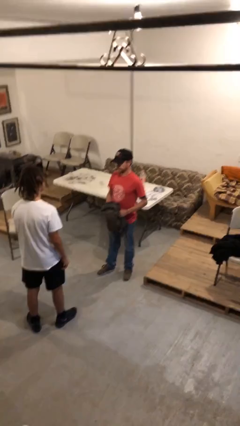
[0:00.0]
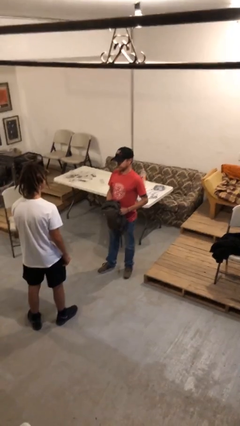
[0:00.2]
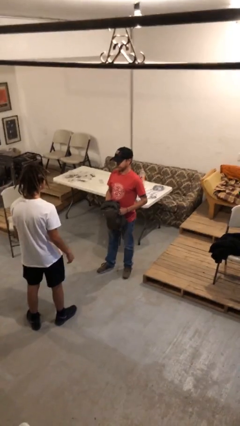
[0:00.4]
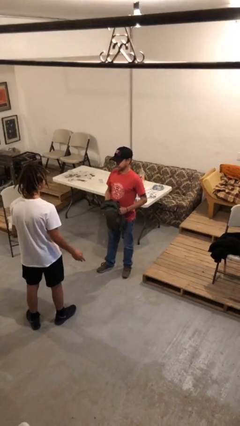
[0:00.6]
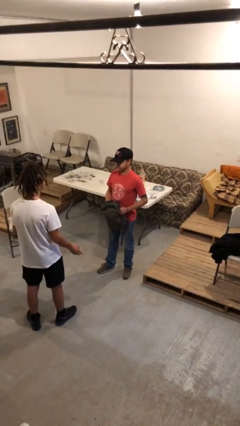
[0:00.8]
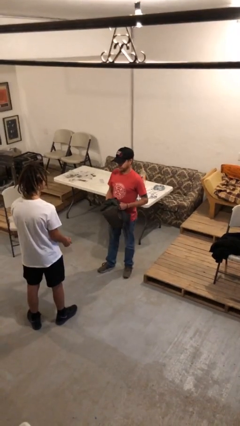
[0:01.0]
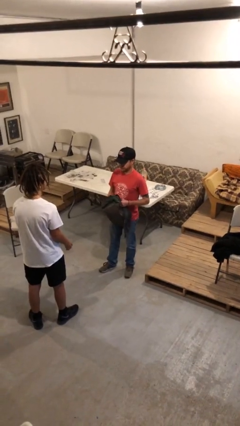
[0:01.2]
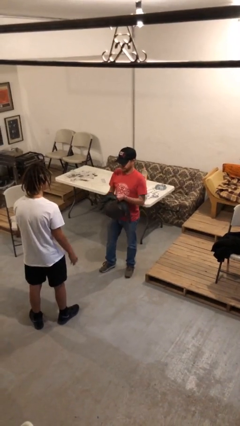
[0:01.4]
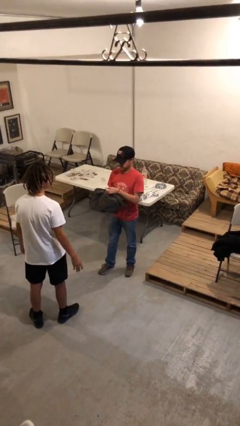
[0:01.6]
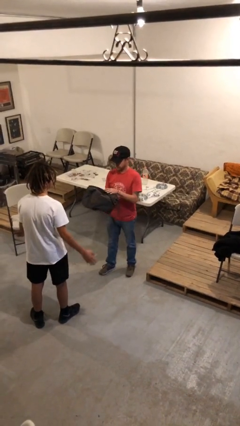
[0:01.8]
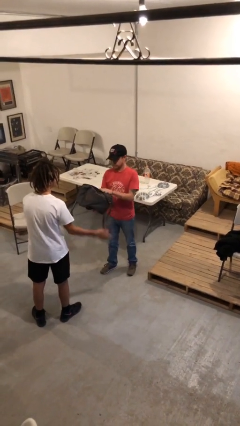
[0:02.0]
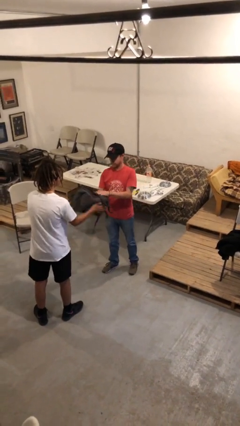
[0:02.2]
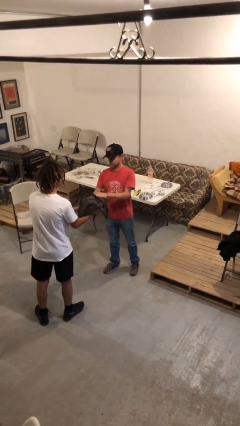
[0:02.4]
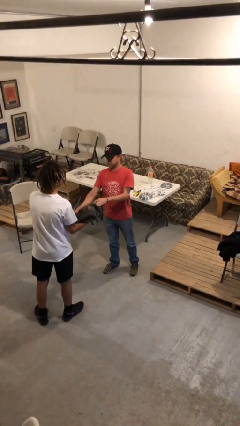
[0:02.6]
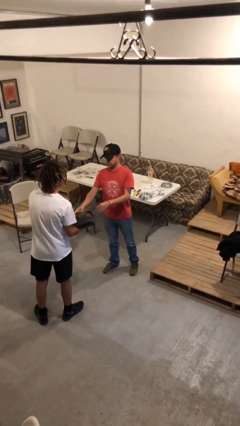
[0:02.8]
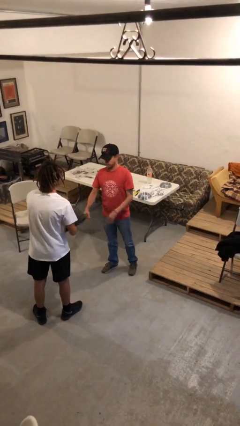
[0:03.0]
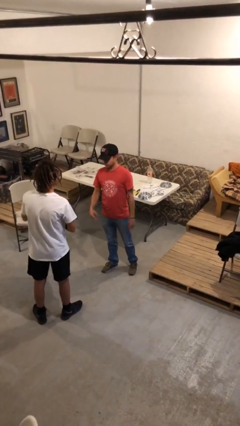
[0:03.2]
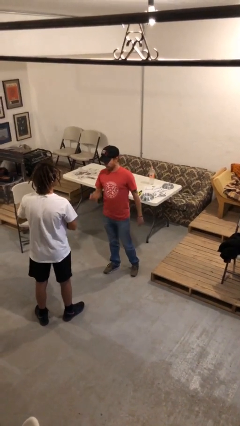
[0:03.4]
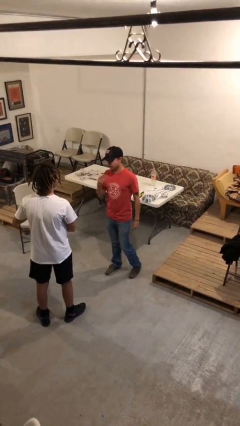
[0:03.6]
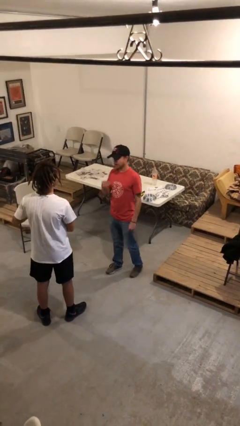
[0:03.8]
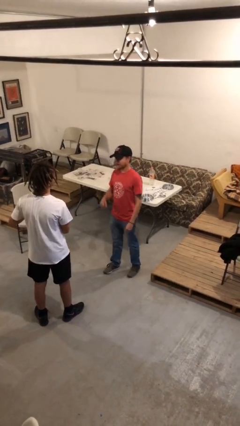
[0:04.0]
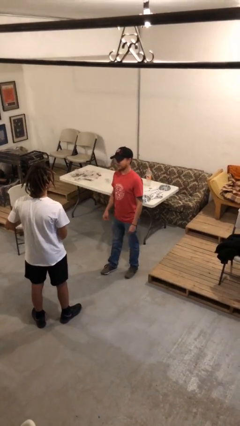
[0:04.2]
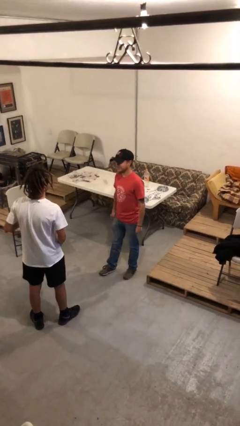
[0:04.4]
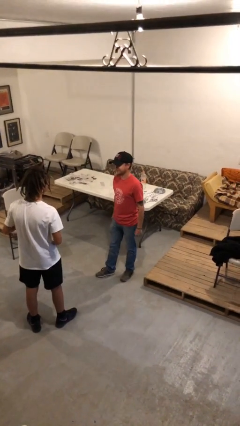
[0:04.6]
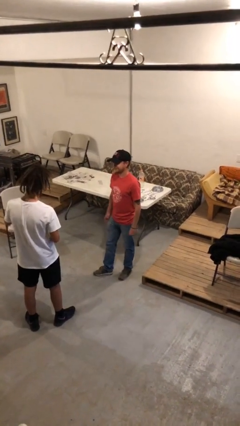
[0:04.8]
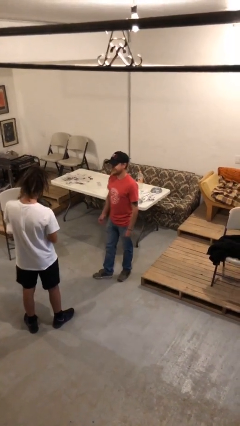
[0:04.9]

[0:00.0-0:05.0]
person transfers object to person

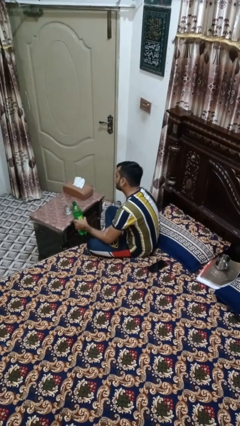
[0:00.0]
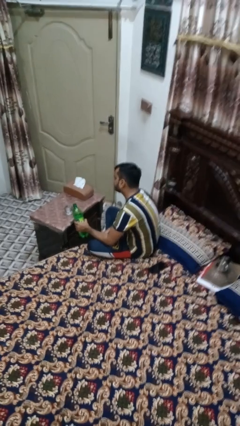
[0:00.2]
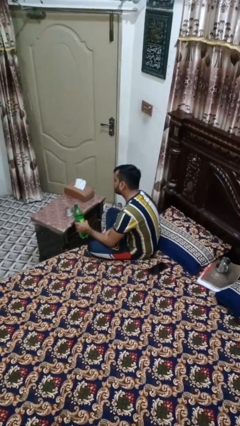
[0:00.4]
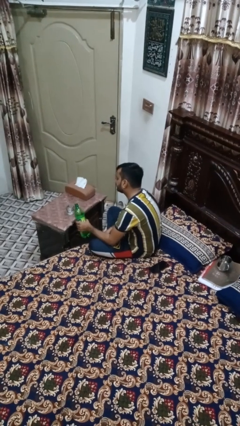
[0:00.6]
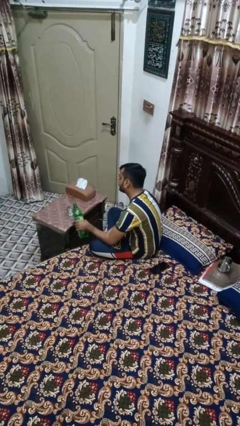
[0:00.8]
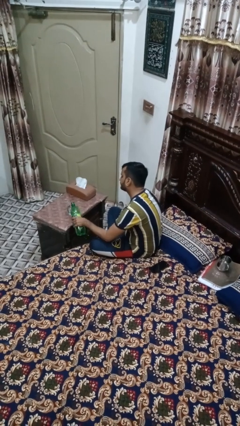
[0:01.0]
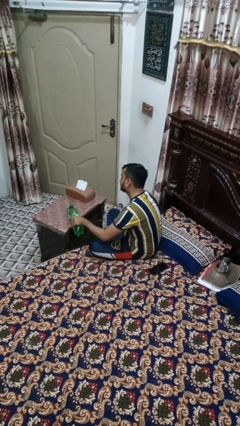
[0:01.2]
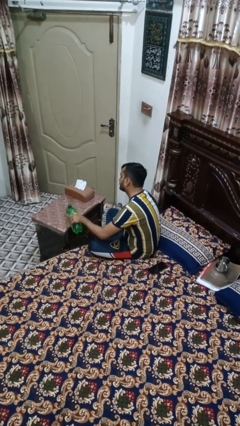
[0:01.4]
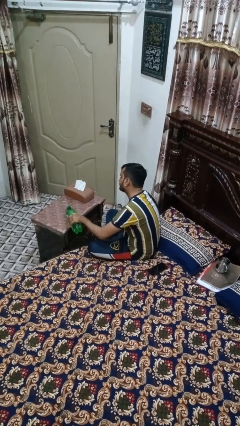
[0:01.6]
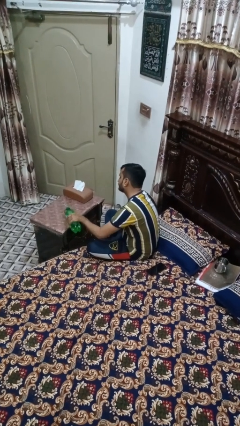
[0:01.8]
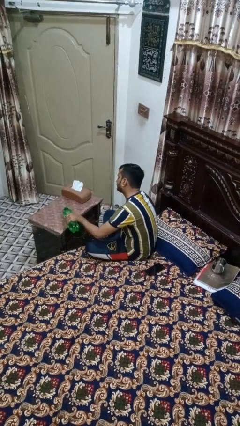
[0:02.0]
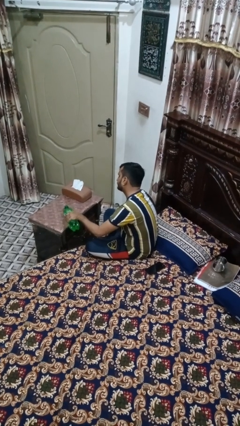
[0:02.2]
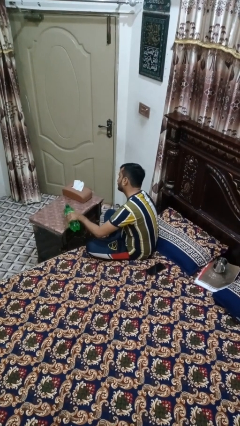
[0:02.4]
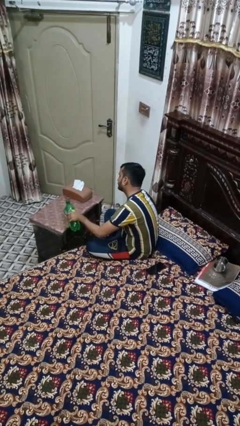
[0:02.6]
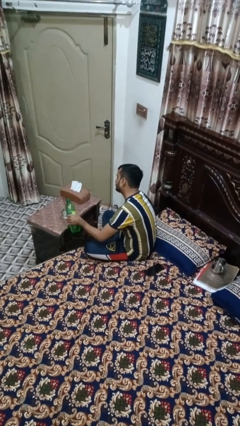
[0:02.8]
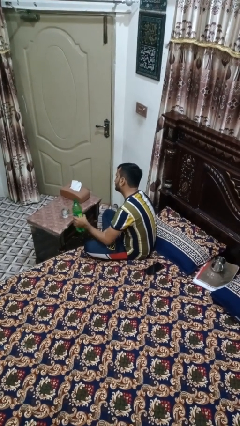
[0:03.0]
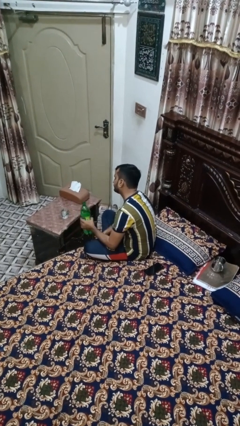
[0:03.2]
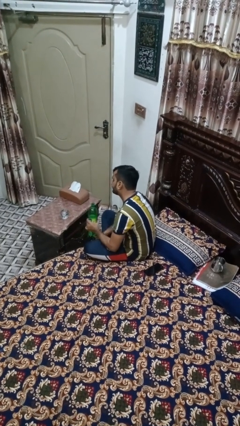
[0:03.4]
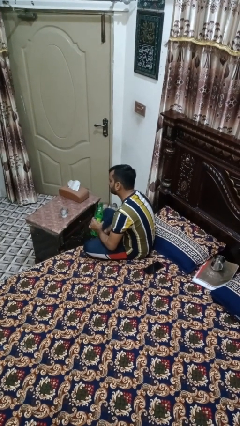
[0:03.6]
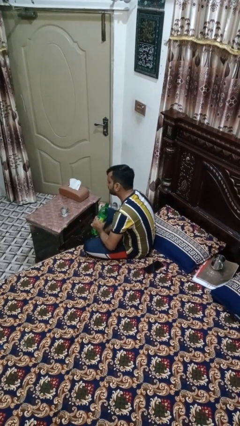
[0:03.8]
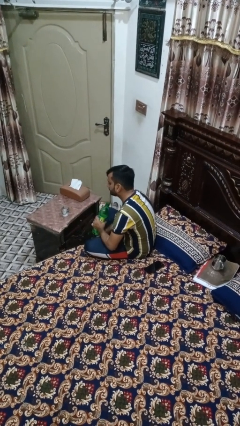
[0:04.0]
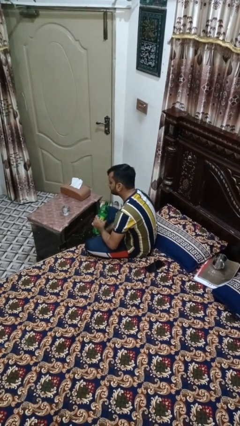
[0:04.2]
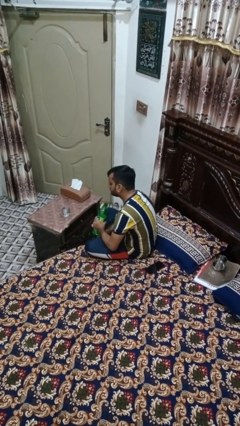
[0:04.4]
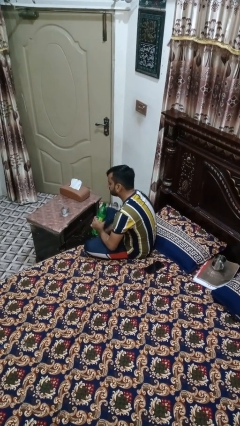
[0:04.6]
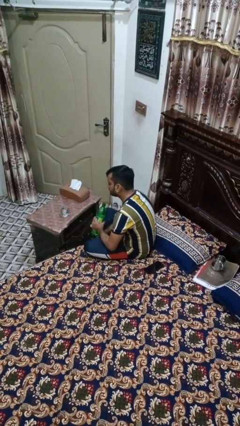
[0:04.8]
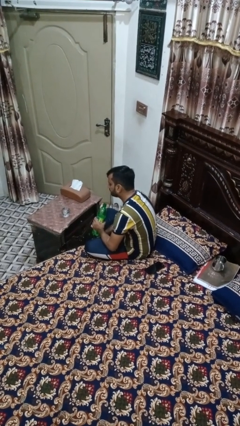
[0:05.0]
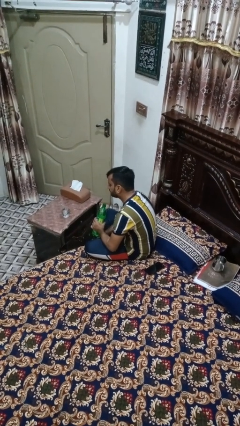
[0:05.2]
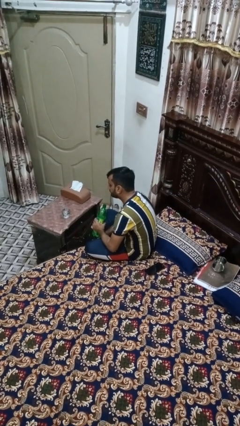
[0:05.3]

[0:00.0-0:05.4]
person pours liquid into cup

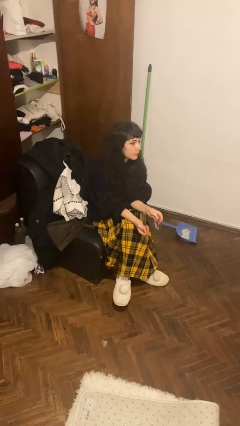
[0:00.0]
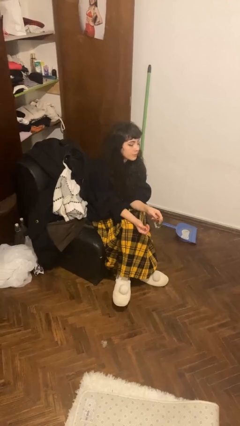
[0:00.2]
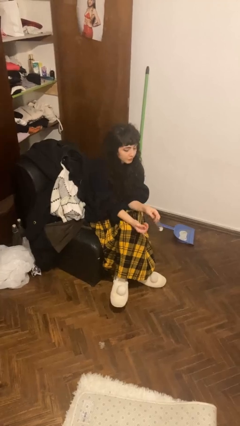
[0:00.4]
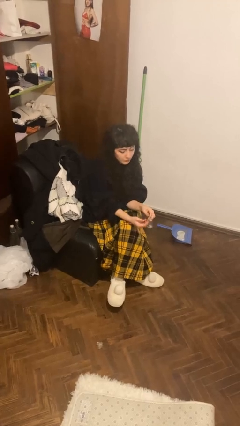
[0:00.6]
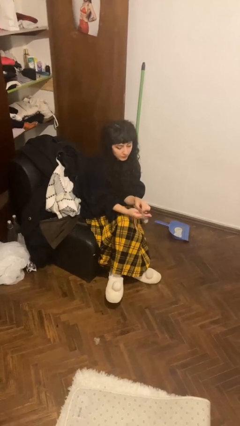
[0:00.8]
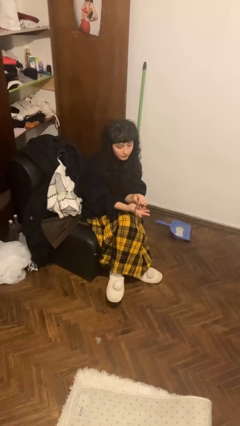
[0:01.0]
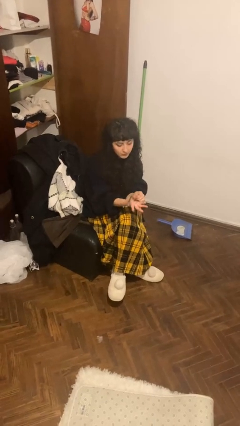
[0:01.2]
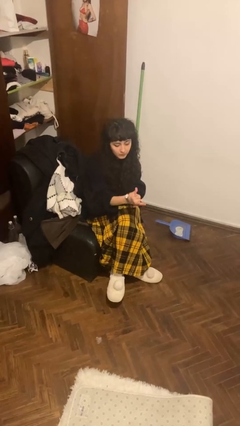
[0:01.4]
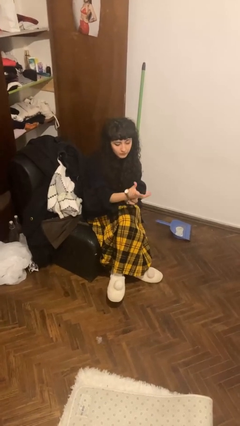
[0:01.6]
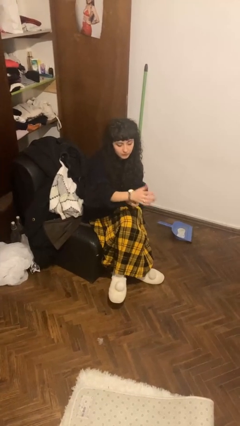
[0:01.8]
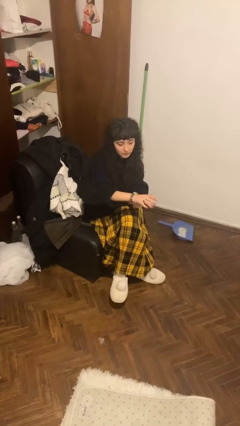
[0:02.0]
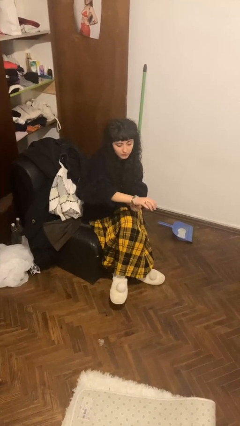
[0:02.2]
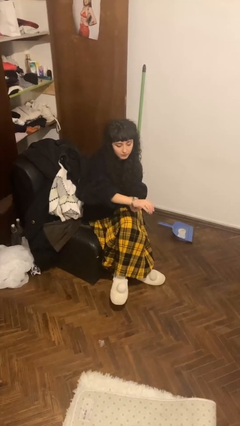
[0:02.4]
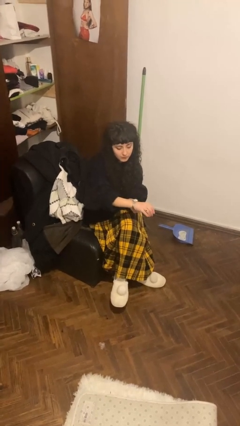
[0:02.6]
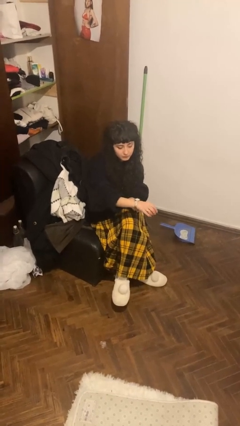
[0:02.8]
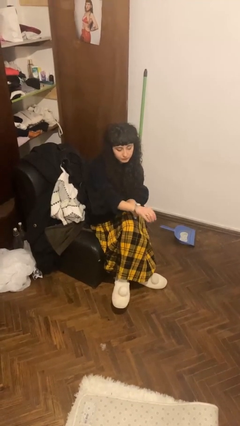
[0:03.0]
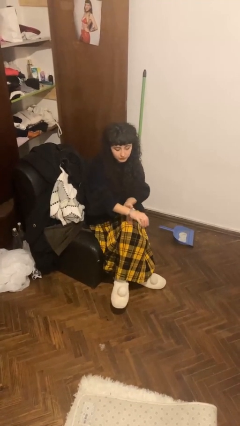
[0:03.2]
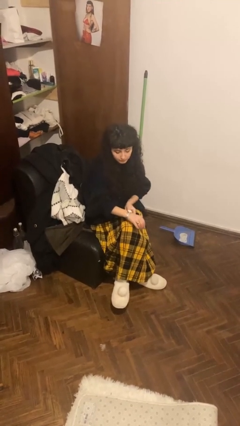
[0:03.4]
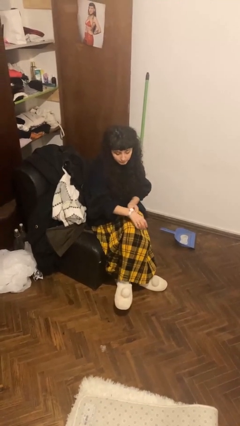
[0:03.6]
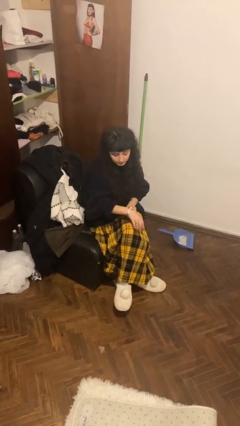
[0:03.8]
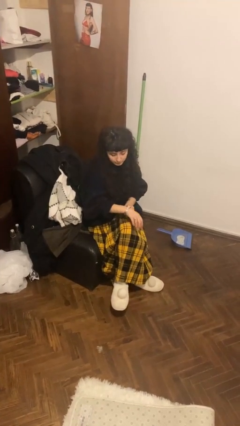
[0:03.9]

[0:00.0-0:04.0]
person puts on wristwatch

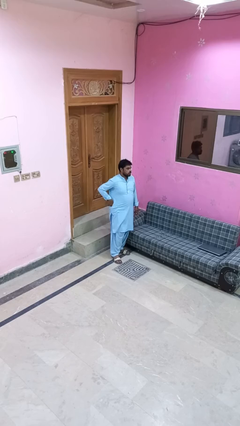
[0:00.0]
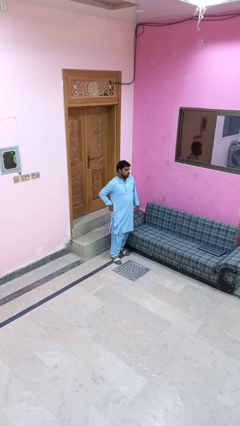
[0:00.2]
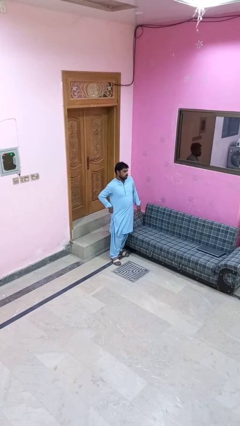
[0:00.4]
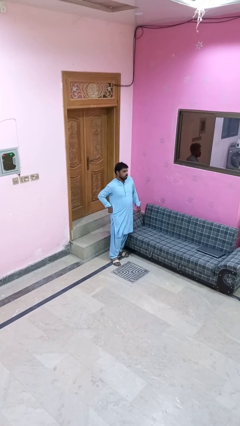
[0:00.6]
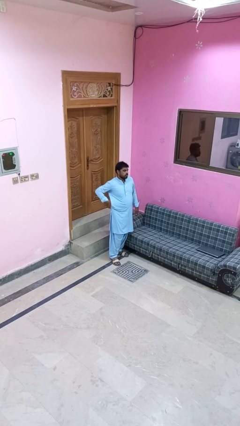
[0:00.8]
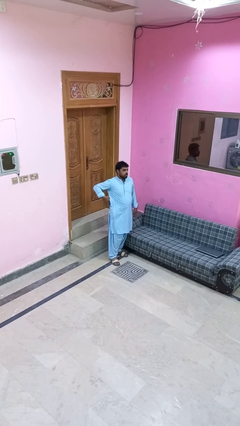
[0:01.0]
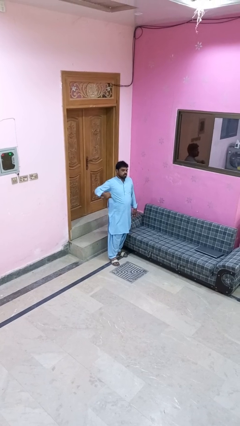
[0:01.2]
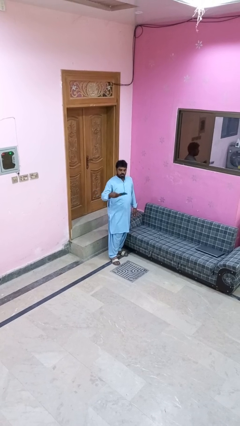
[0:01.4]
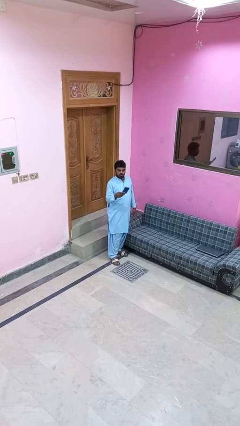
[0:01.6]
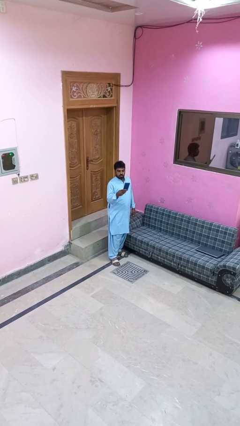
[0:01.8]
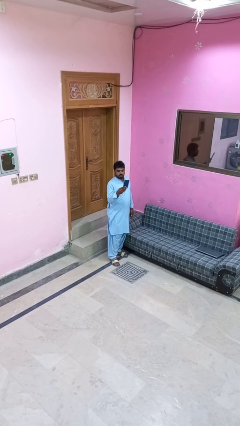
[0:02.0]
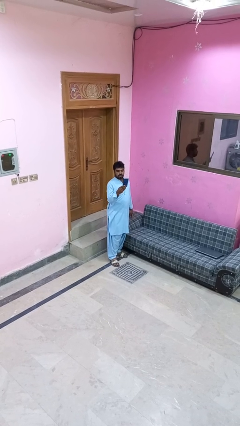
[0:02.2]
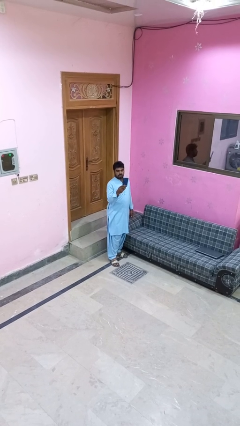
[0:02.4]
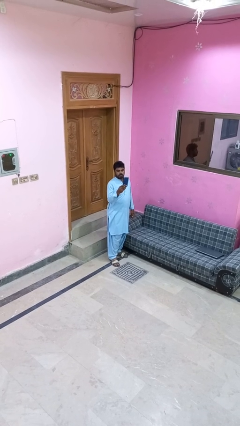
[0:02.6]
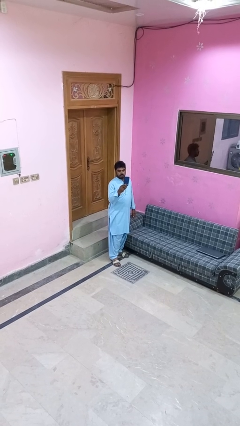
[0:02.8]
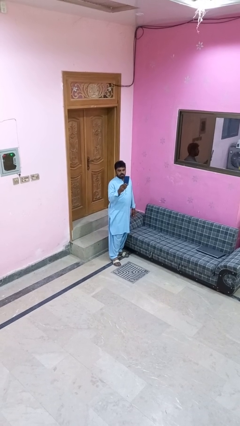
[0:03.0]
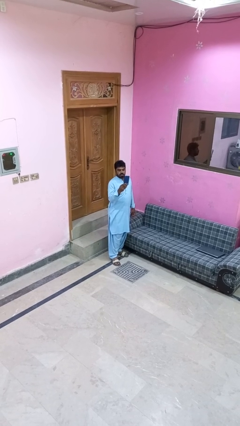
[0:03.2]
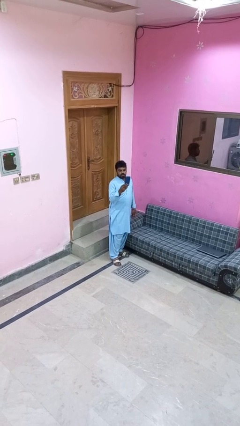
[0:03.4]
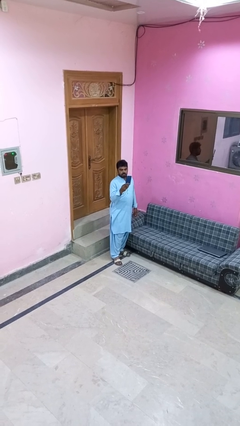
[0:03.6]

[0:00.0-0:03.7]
person takes phone from pocket
